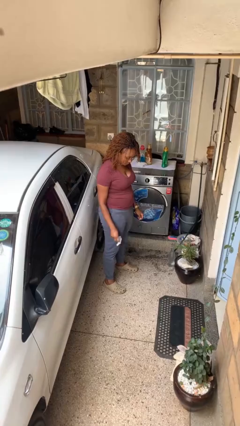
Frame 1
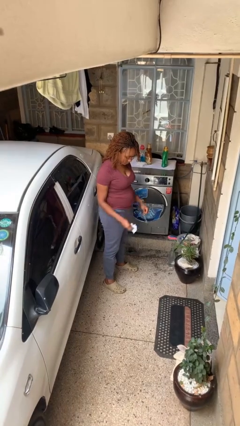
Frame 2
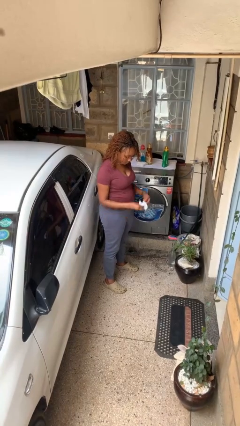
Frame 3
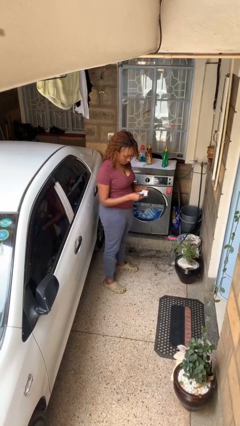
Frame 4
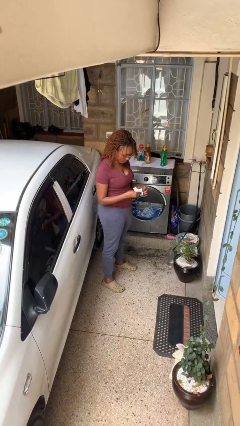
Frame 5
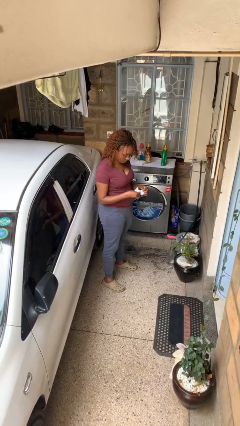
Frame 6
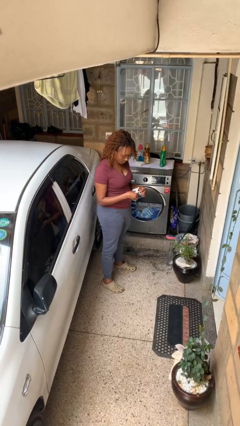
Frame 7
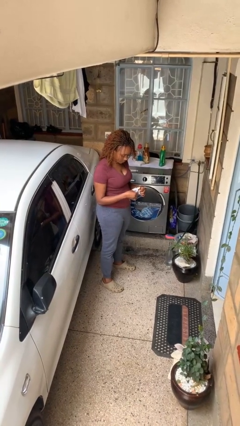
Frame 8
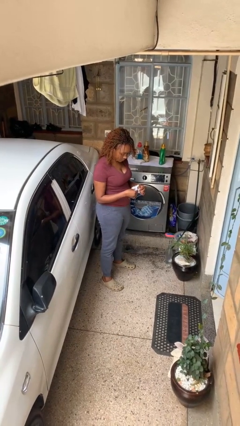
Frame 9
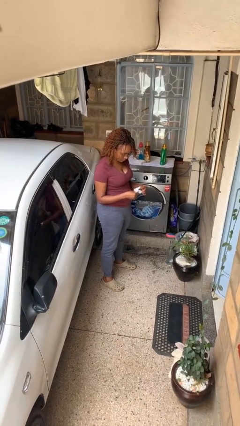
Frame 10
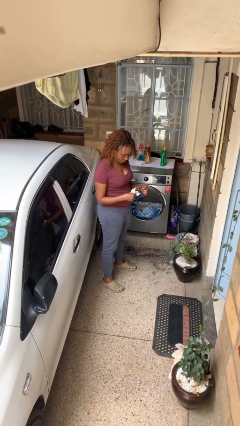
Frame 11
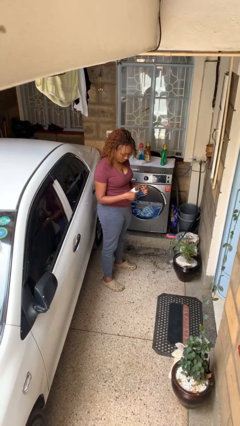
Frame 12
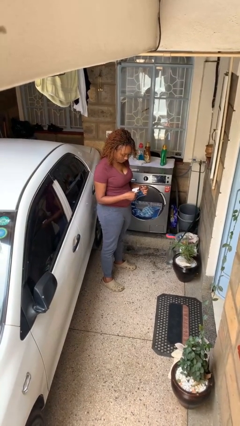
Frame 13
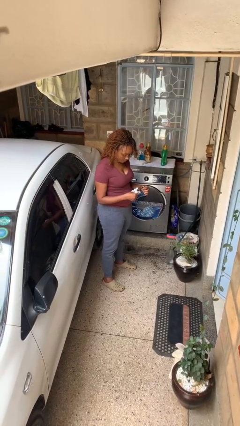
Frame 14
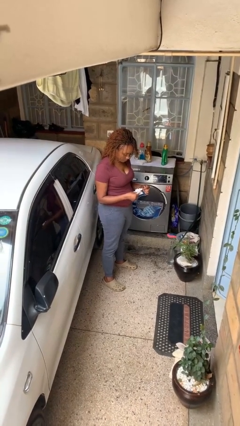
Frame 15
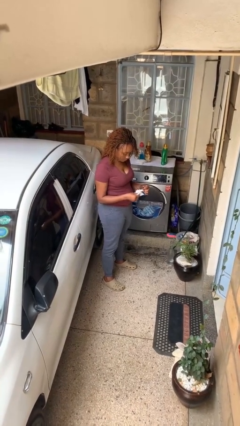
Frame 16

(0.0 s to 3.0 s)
person cleans eyeglasses

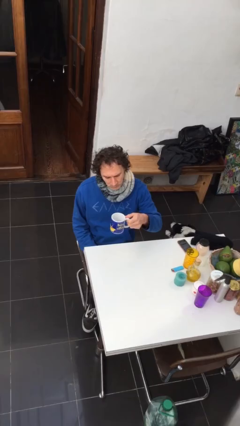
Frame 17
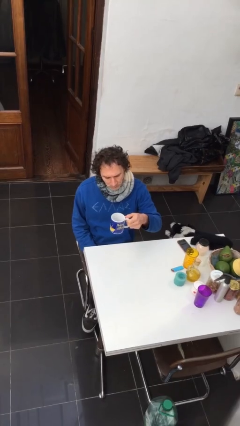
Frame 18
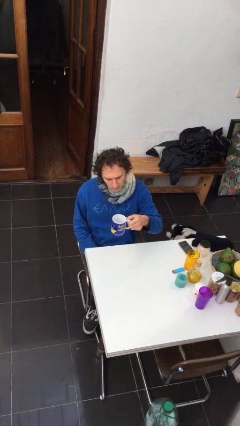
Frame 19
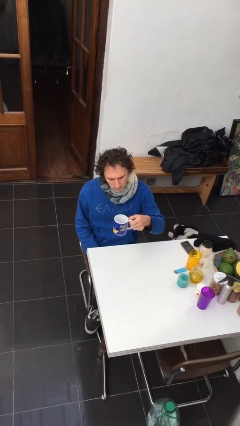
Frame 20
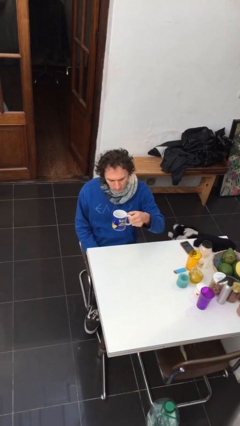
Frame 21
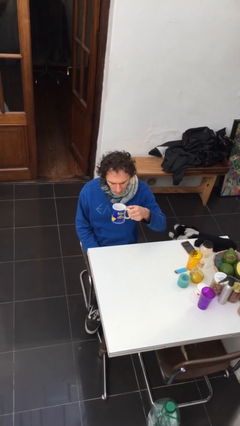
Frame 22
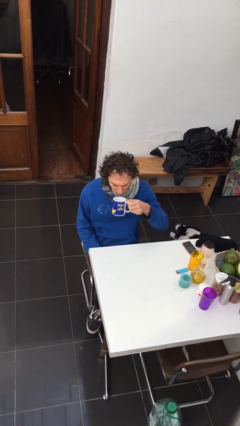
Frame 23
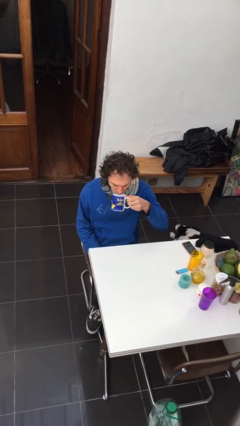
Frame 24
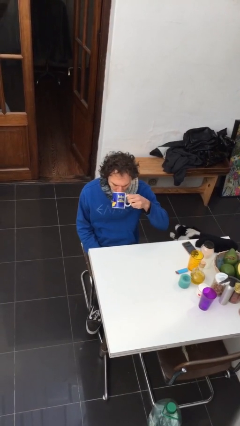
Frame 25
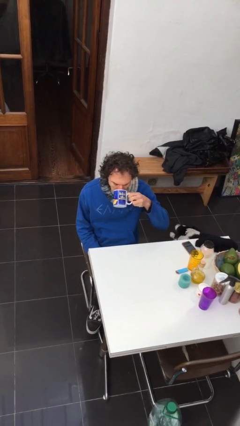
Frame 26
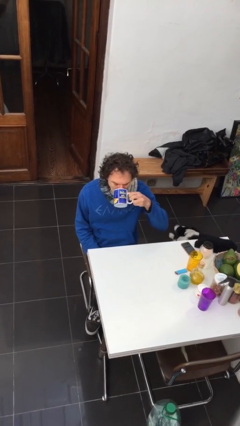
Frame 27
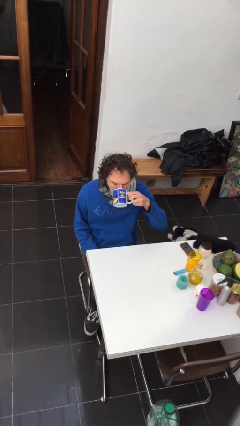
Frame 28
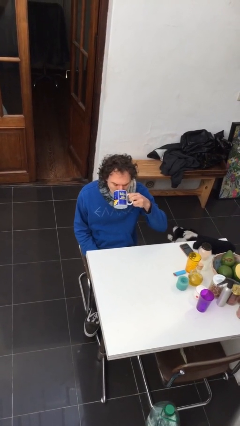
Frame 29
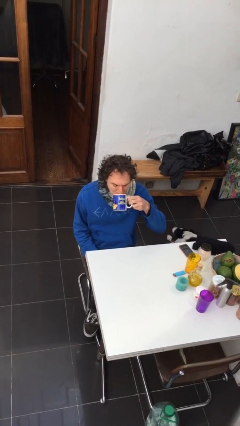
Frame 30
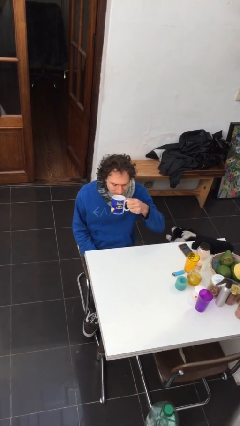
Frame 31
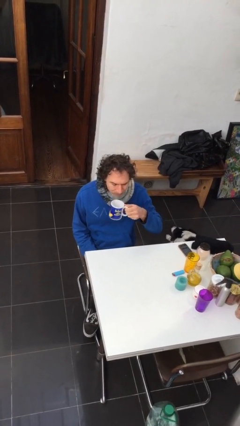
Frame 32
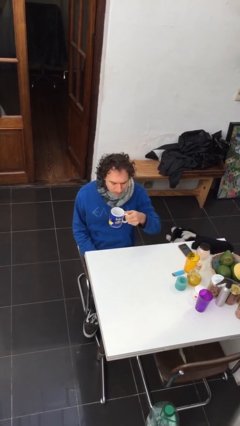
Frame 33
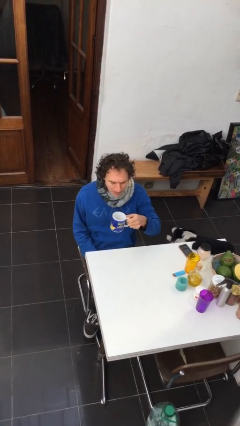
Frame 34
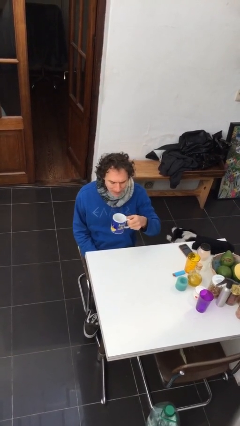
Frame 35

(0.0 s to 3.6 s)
person drinks from mug

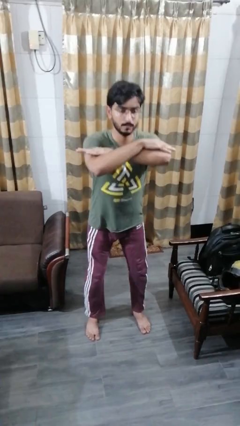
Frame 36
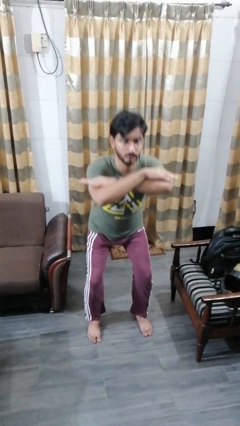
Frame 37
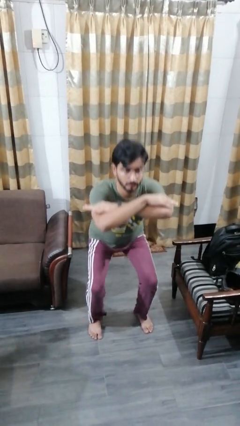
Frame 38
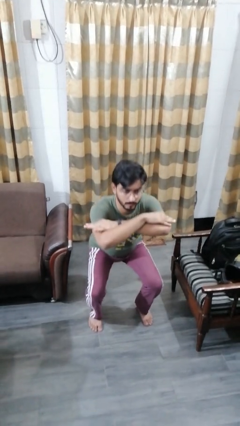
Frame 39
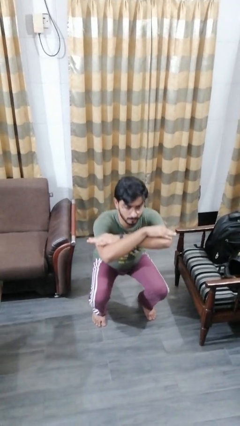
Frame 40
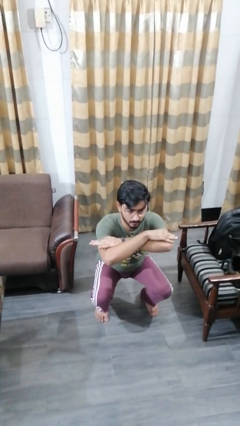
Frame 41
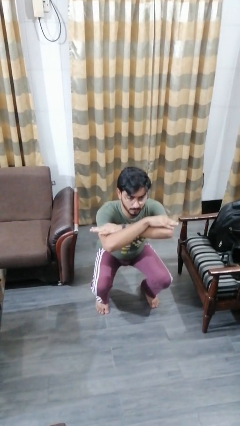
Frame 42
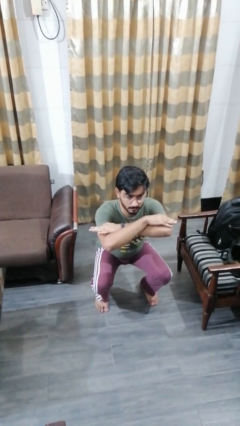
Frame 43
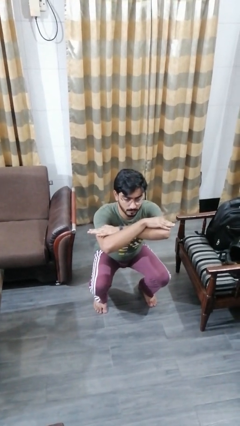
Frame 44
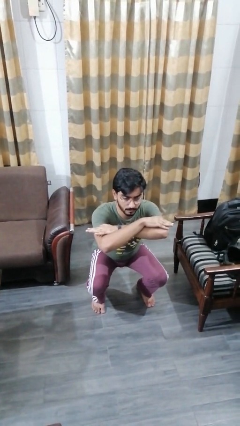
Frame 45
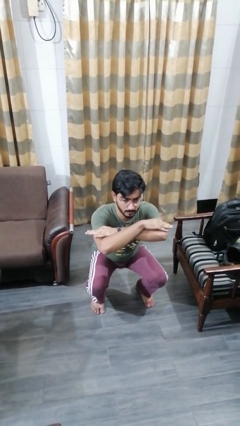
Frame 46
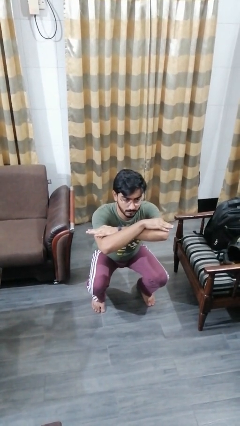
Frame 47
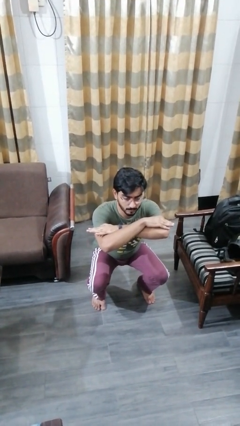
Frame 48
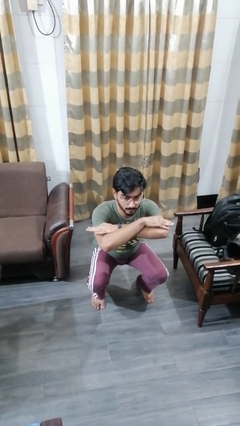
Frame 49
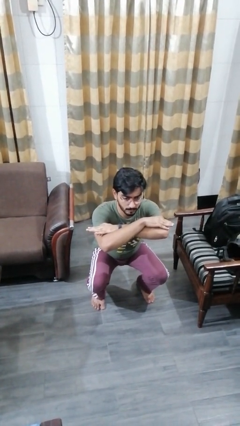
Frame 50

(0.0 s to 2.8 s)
person sits crisscross

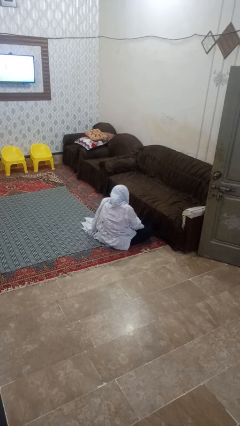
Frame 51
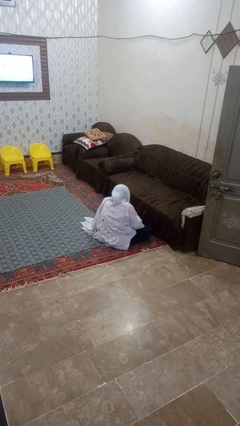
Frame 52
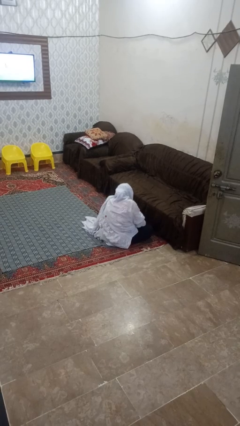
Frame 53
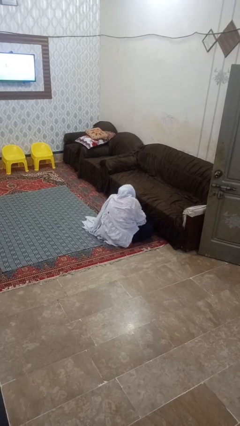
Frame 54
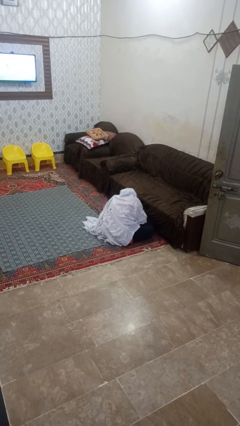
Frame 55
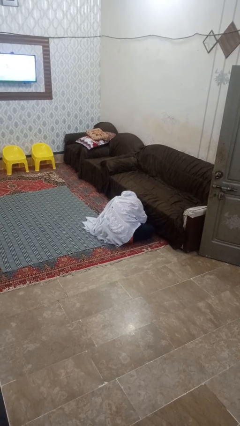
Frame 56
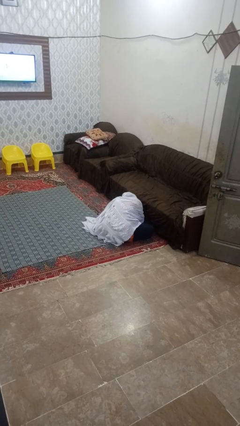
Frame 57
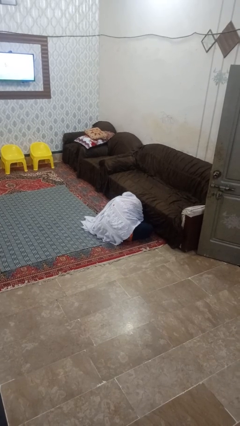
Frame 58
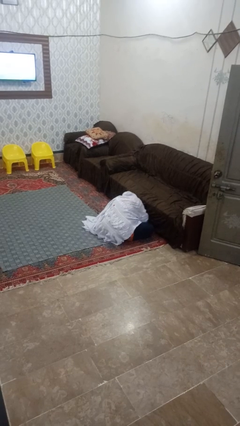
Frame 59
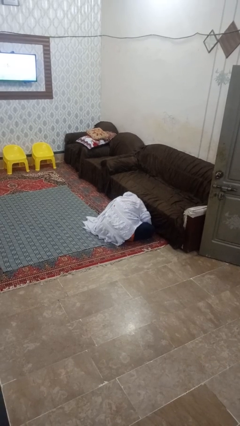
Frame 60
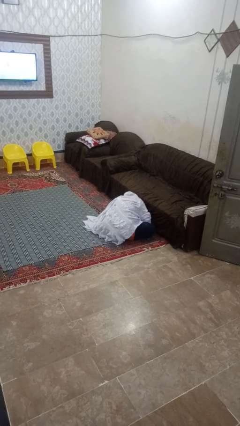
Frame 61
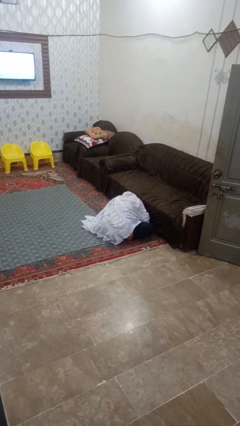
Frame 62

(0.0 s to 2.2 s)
person searches under couch

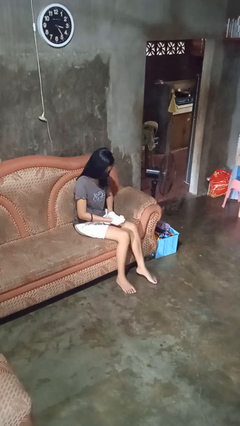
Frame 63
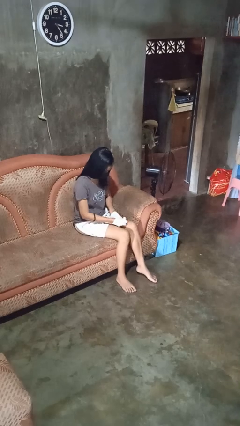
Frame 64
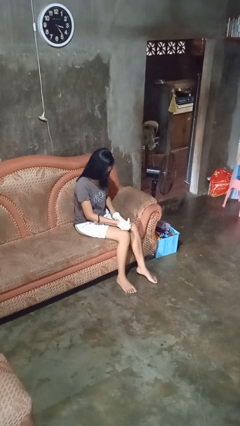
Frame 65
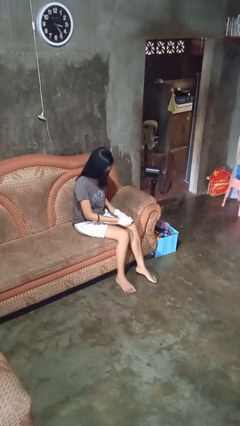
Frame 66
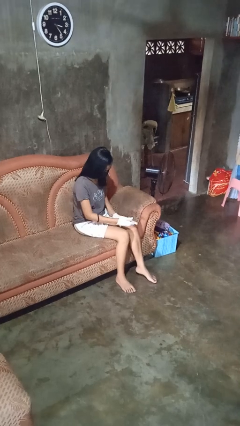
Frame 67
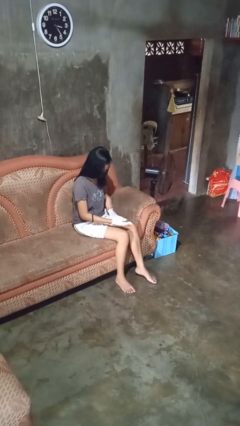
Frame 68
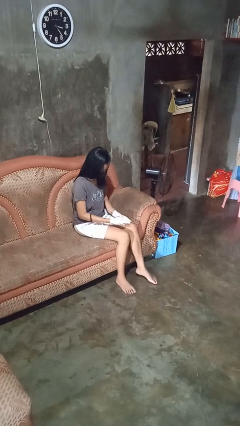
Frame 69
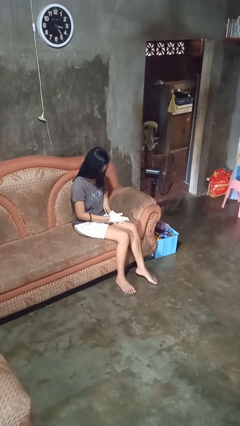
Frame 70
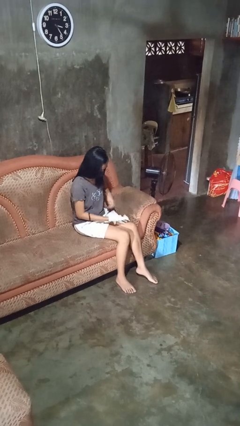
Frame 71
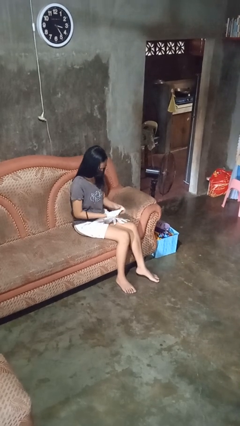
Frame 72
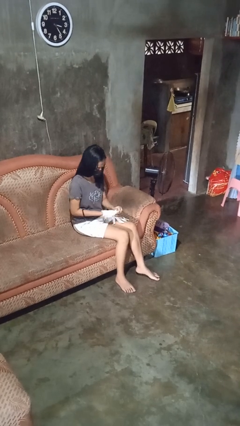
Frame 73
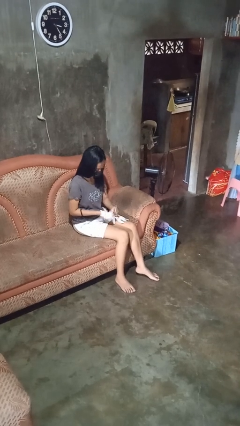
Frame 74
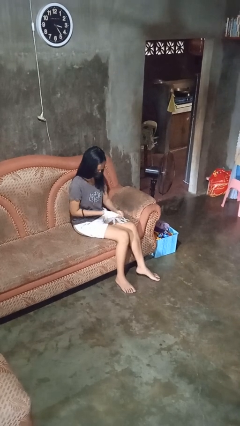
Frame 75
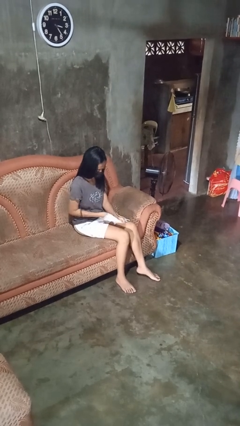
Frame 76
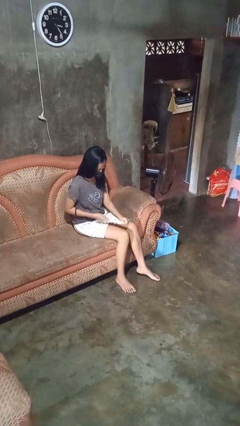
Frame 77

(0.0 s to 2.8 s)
person takes off gloves

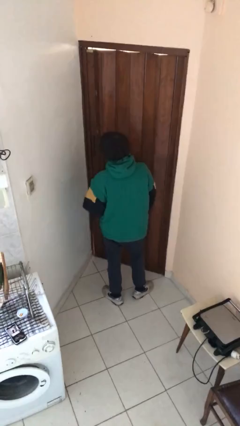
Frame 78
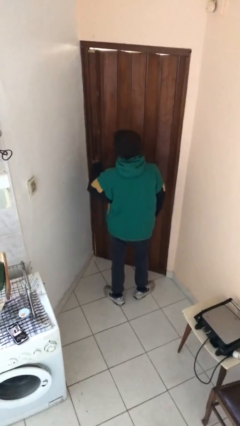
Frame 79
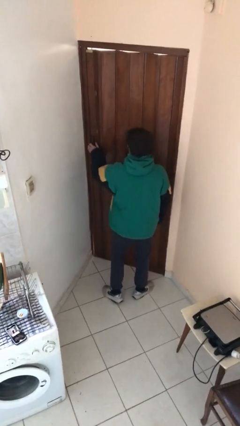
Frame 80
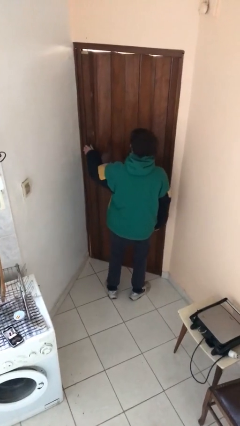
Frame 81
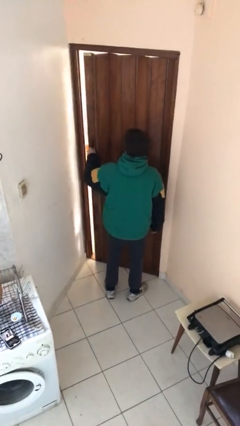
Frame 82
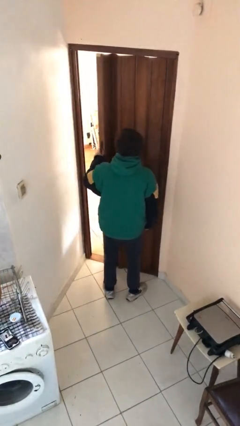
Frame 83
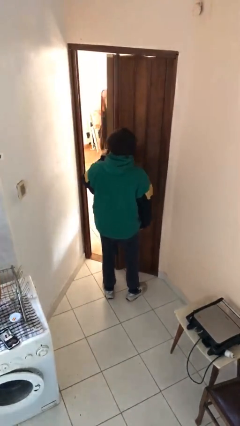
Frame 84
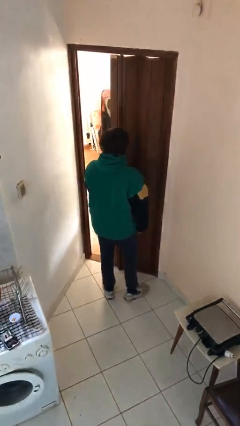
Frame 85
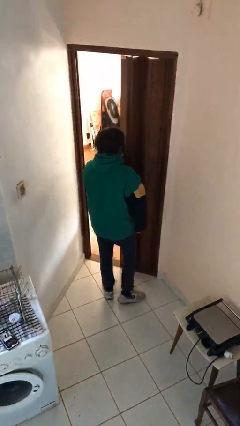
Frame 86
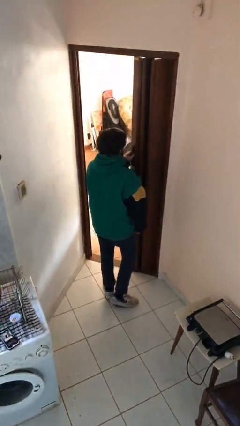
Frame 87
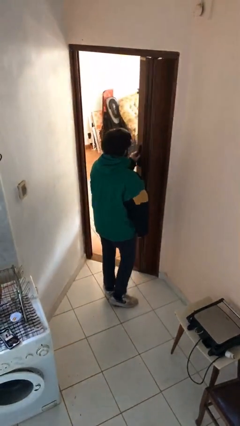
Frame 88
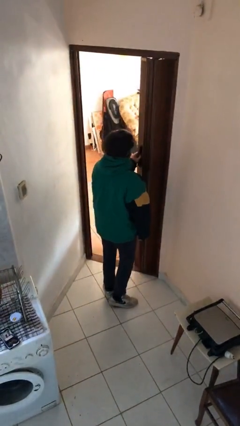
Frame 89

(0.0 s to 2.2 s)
person opens sliding door

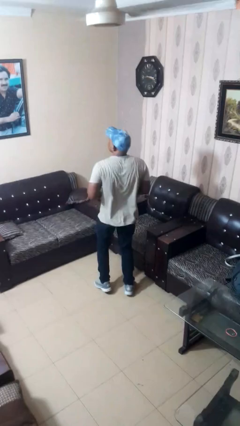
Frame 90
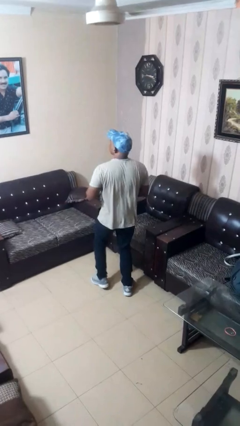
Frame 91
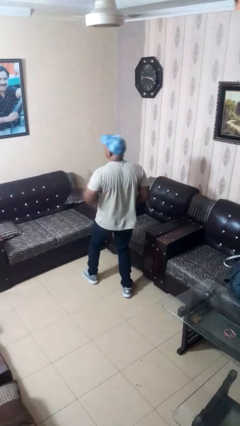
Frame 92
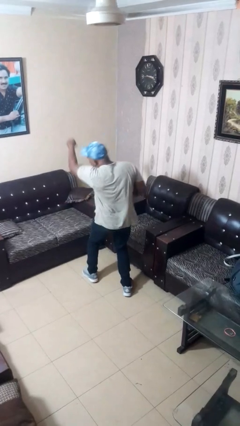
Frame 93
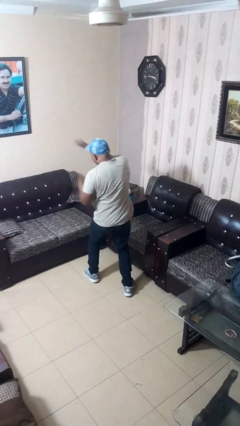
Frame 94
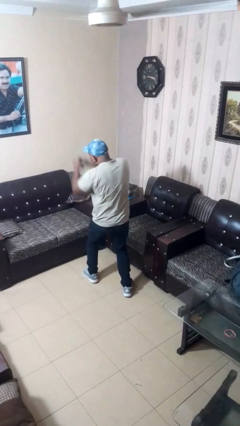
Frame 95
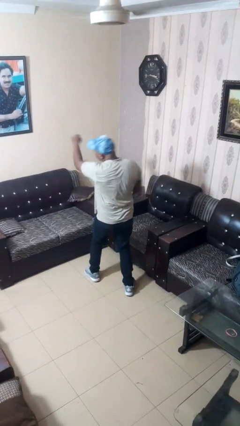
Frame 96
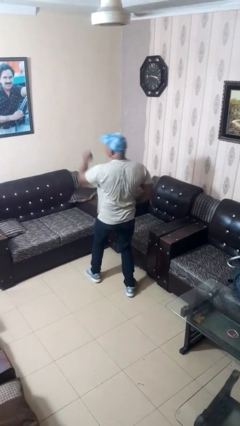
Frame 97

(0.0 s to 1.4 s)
person punches
